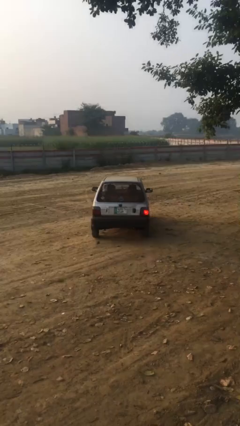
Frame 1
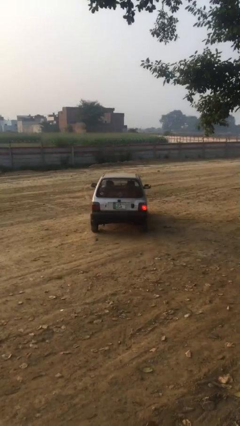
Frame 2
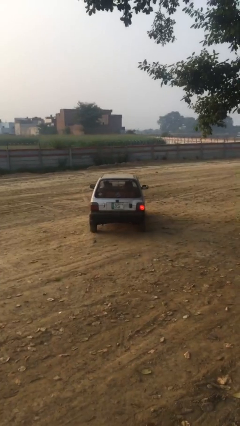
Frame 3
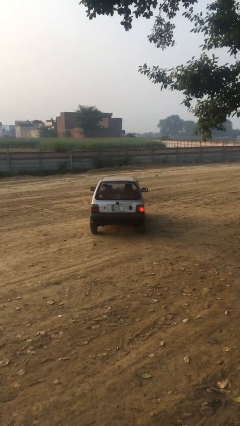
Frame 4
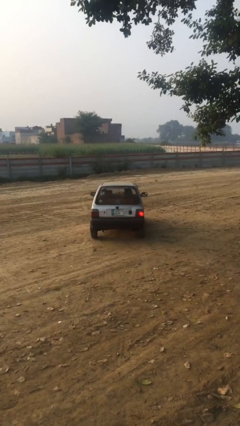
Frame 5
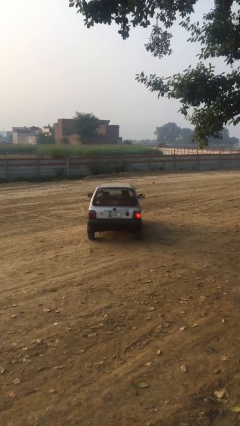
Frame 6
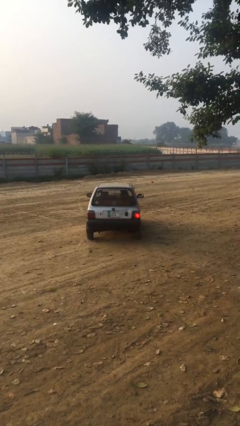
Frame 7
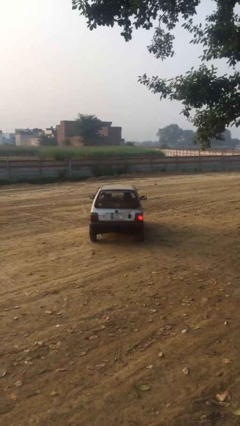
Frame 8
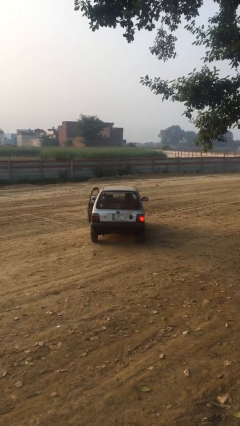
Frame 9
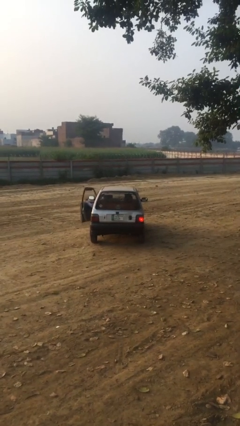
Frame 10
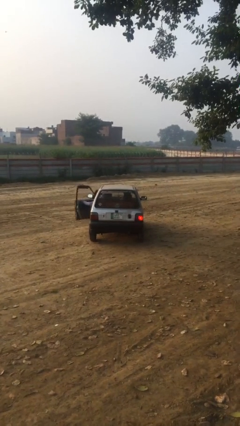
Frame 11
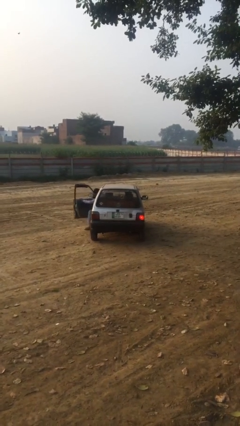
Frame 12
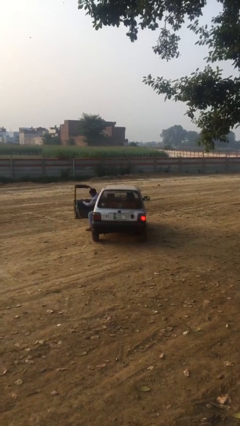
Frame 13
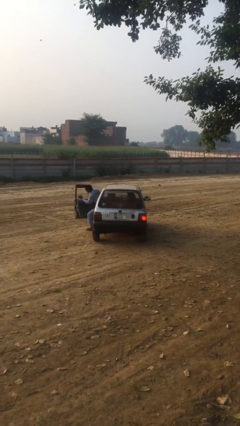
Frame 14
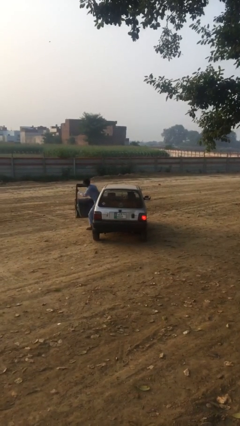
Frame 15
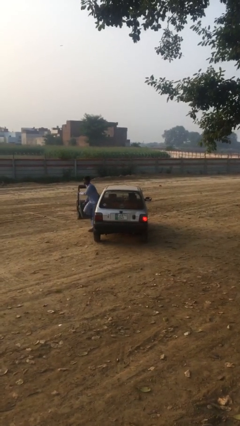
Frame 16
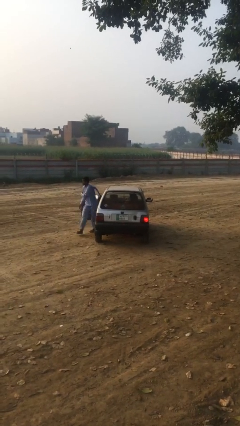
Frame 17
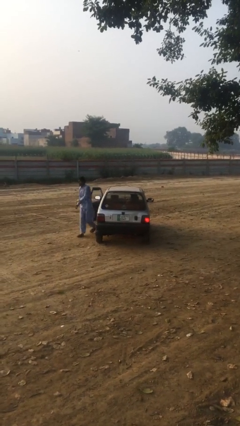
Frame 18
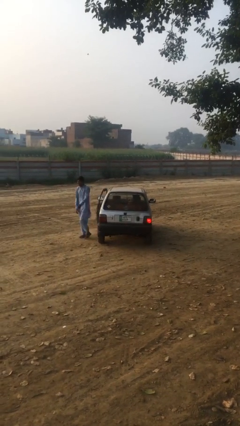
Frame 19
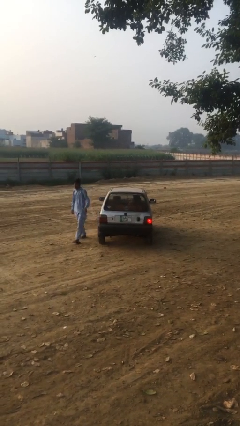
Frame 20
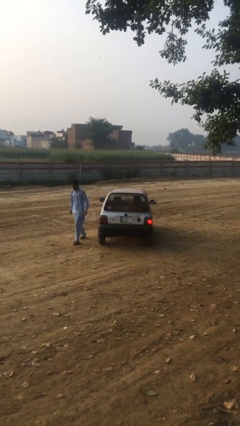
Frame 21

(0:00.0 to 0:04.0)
car drops off person

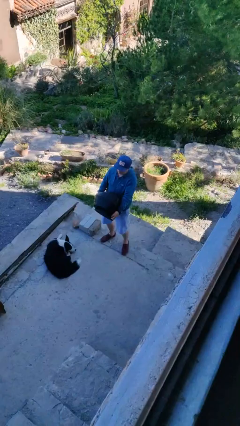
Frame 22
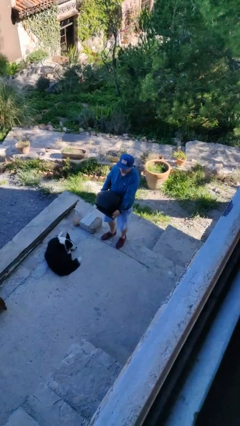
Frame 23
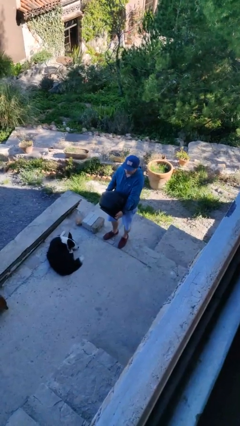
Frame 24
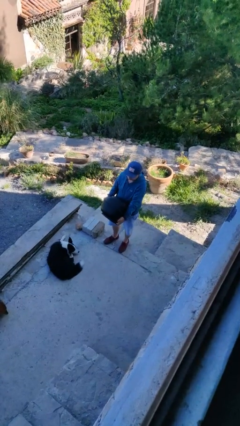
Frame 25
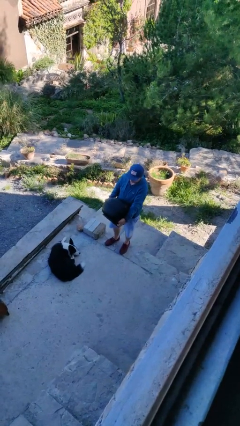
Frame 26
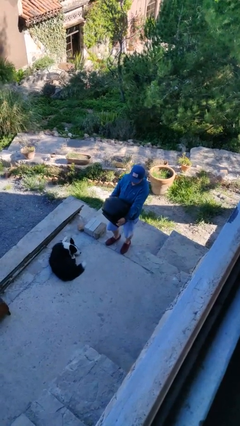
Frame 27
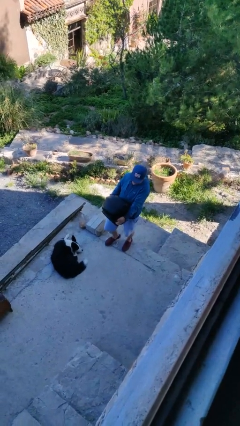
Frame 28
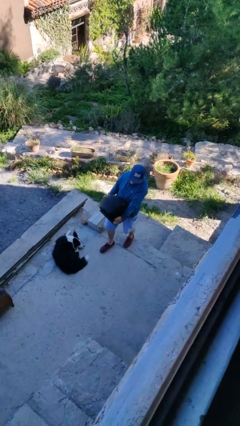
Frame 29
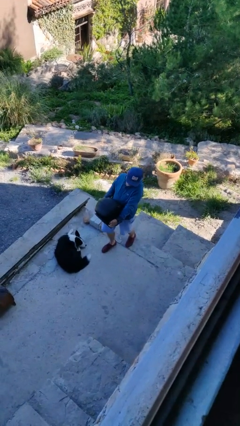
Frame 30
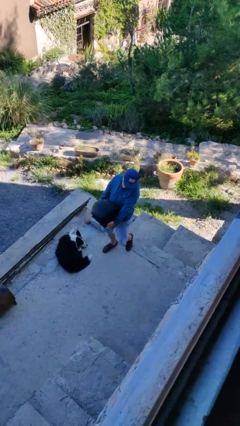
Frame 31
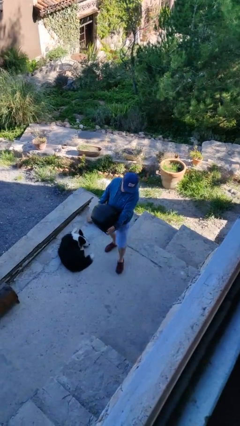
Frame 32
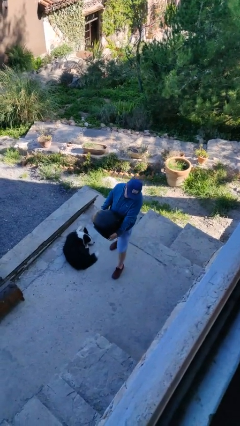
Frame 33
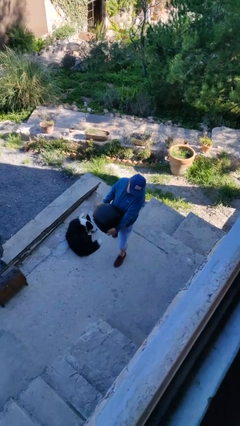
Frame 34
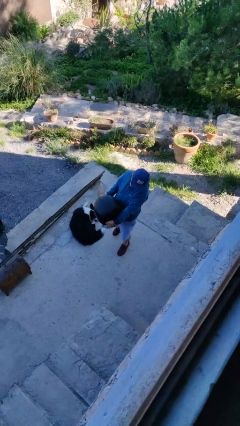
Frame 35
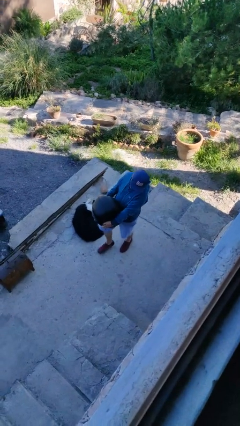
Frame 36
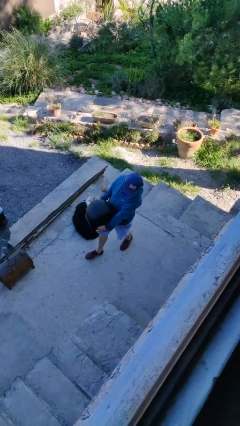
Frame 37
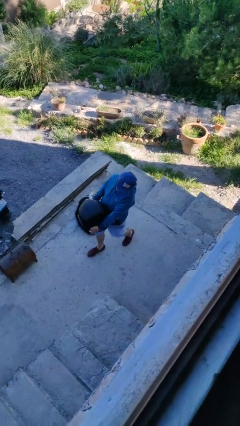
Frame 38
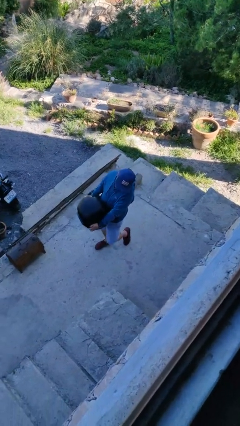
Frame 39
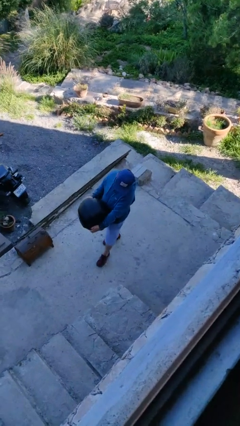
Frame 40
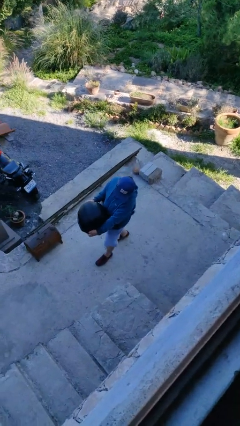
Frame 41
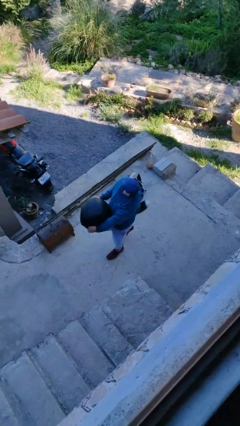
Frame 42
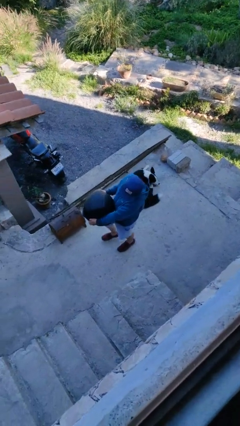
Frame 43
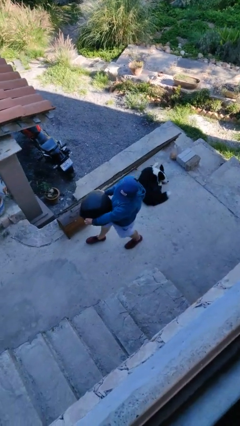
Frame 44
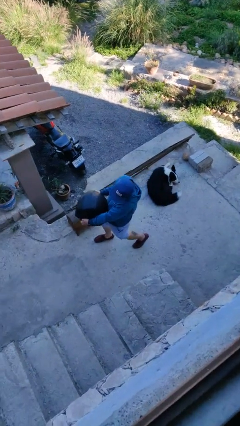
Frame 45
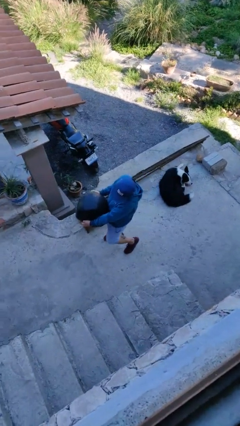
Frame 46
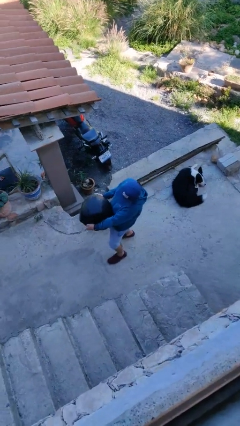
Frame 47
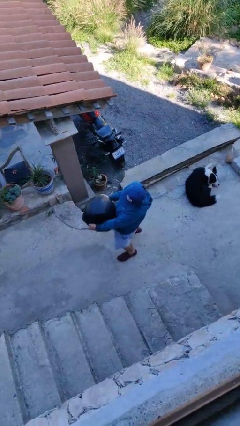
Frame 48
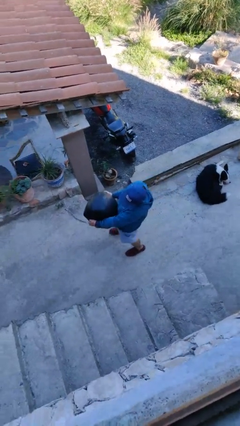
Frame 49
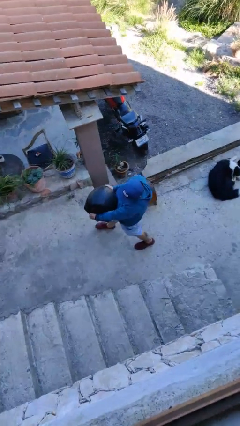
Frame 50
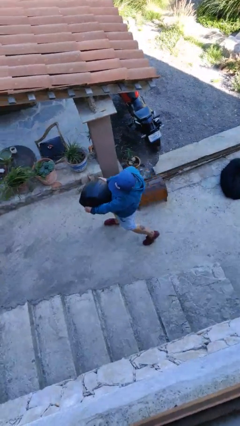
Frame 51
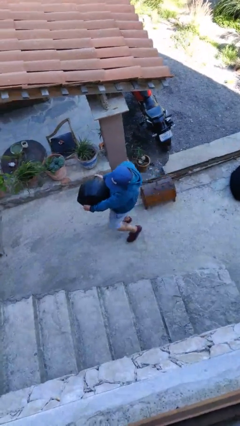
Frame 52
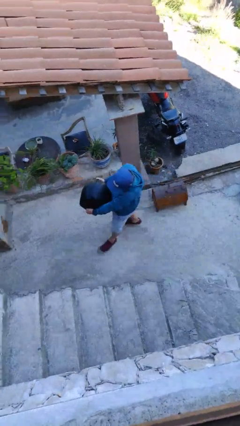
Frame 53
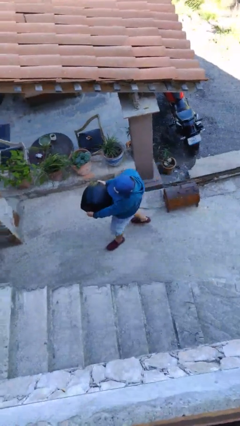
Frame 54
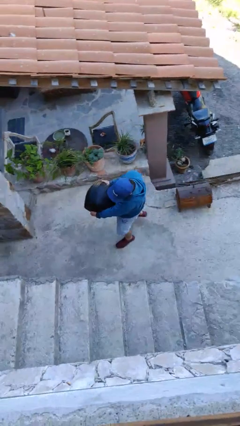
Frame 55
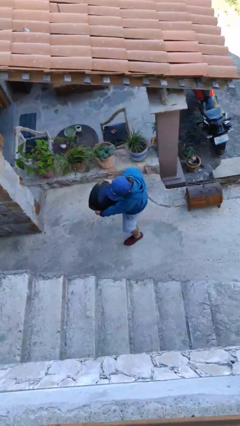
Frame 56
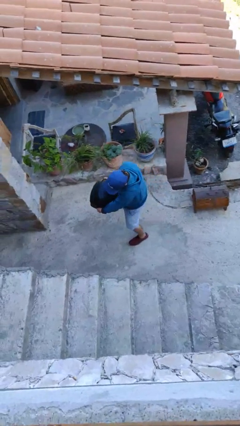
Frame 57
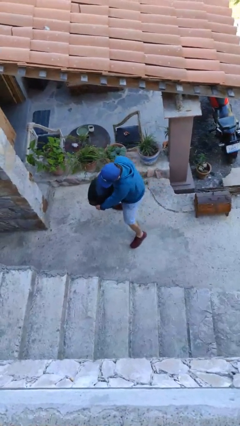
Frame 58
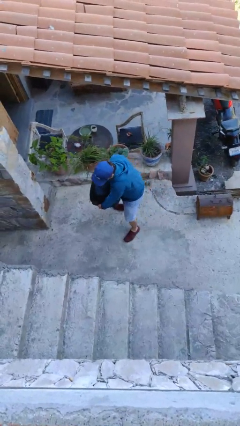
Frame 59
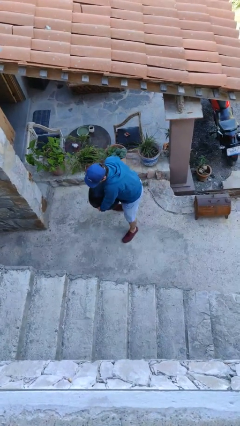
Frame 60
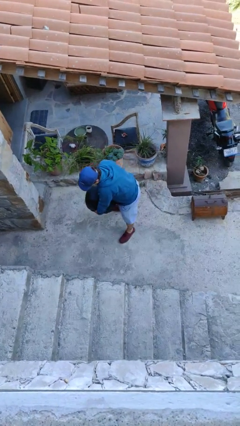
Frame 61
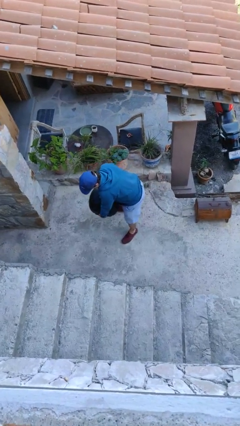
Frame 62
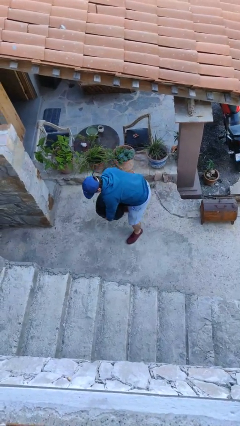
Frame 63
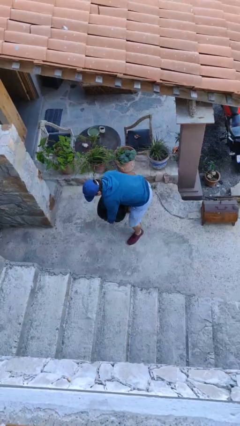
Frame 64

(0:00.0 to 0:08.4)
person carries heavy object

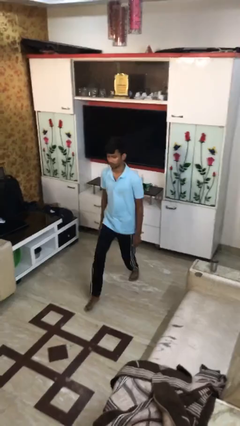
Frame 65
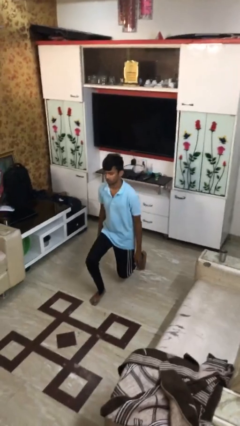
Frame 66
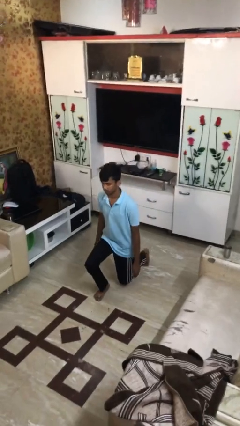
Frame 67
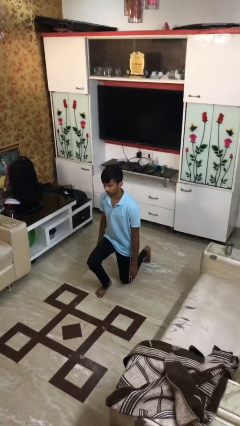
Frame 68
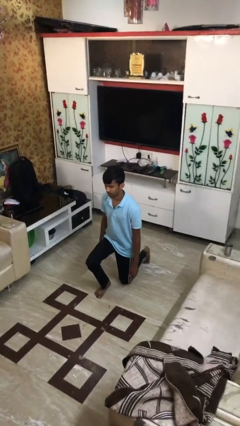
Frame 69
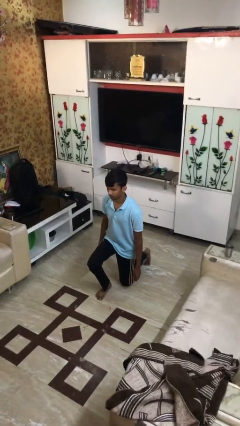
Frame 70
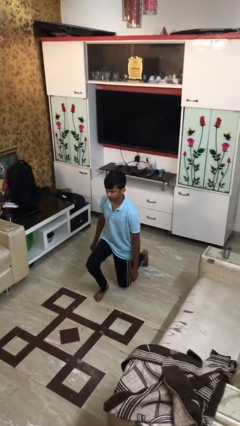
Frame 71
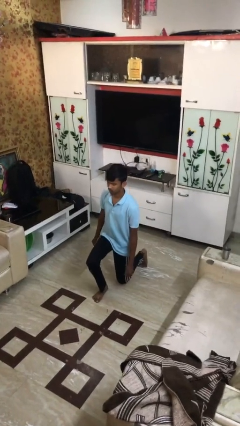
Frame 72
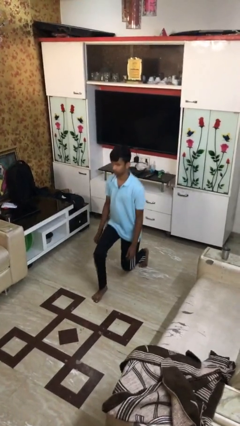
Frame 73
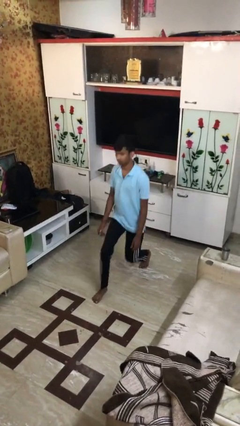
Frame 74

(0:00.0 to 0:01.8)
person exercises with lunges

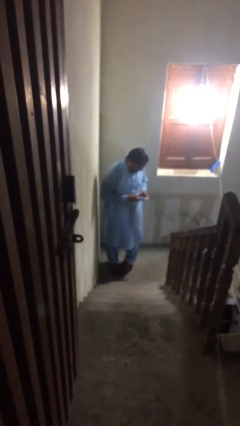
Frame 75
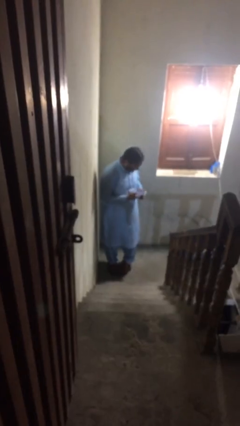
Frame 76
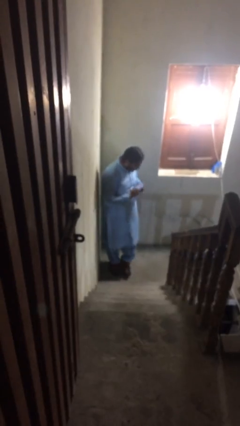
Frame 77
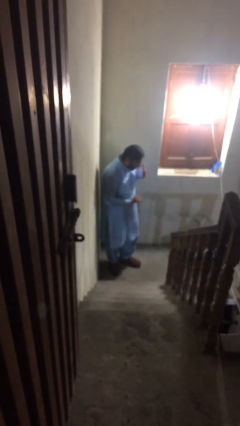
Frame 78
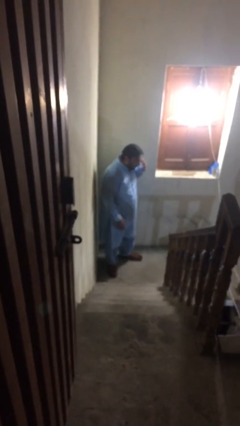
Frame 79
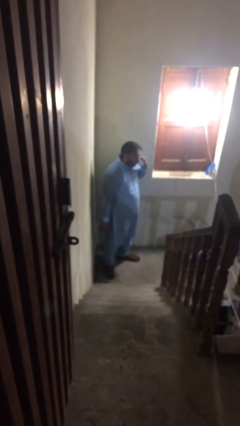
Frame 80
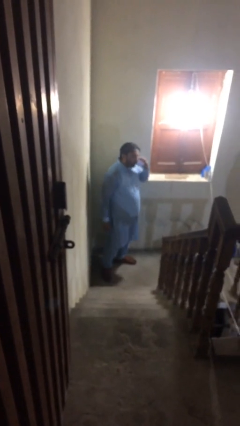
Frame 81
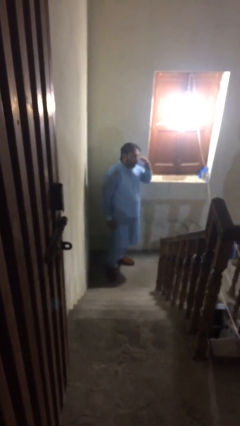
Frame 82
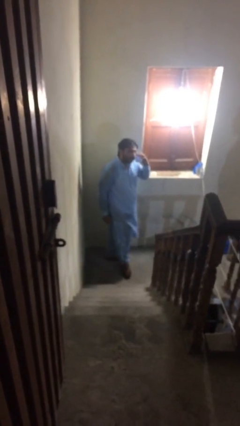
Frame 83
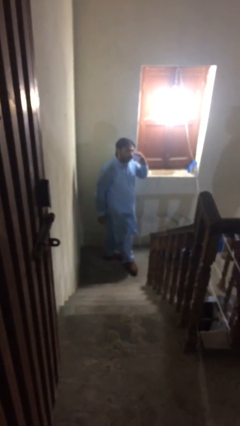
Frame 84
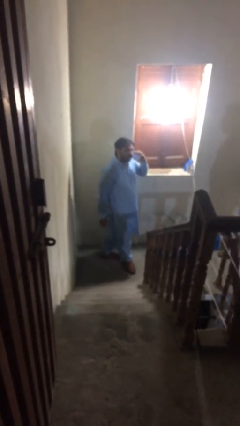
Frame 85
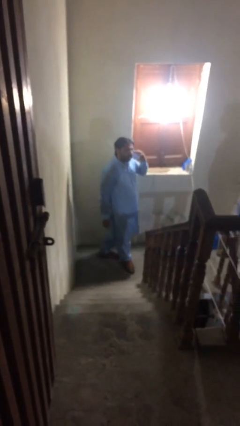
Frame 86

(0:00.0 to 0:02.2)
person talks on phone

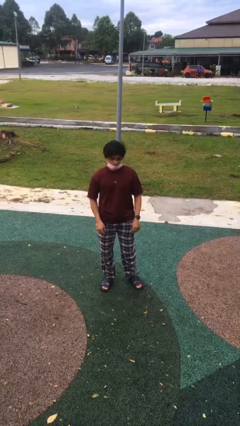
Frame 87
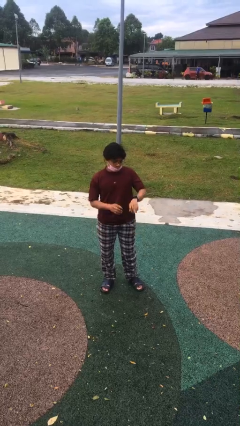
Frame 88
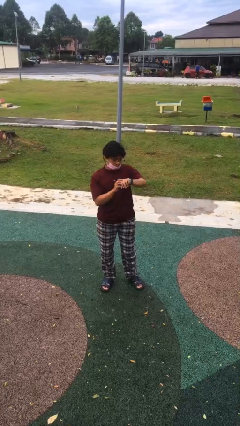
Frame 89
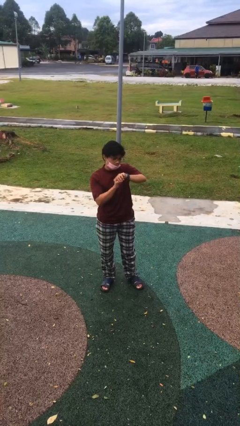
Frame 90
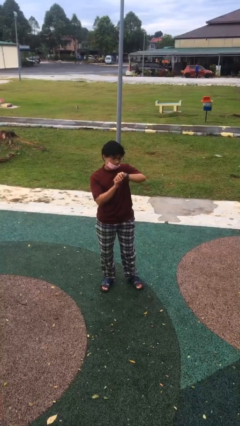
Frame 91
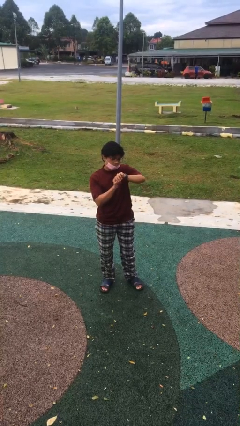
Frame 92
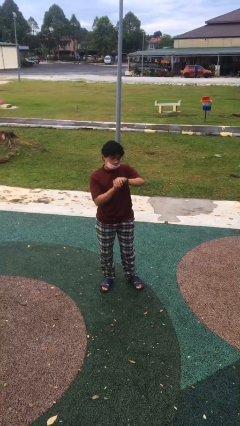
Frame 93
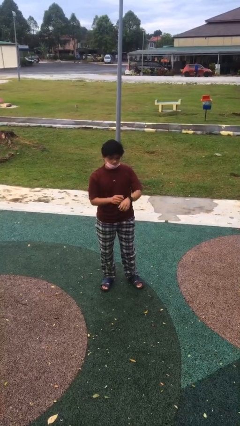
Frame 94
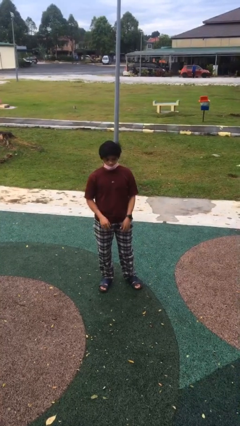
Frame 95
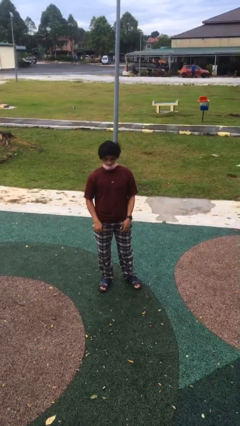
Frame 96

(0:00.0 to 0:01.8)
person looks at wristwatch
